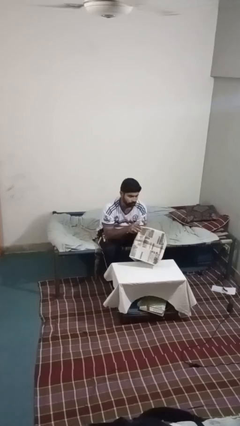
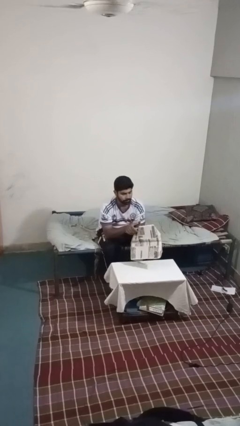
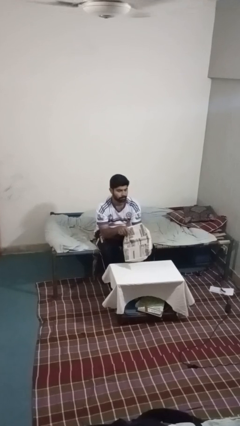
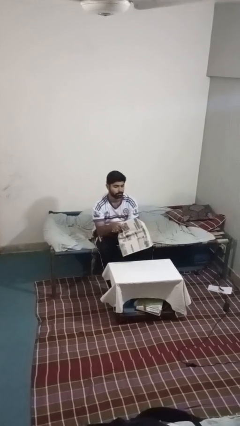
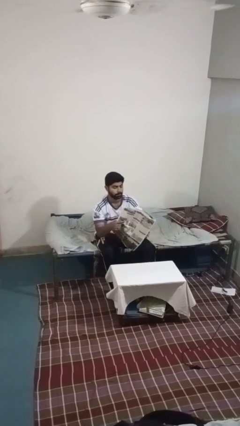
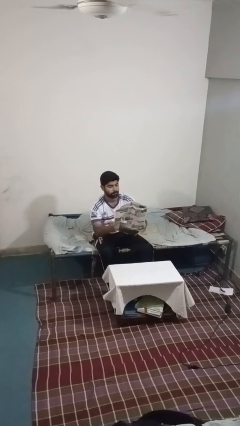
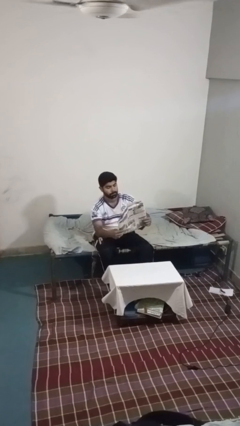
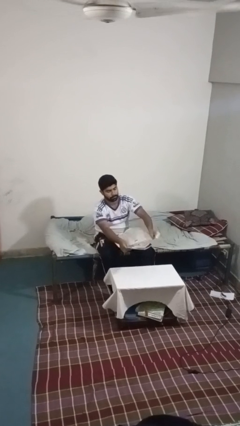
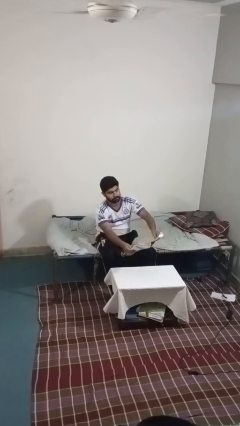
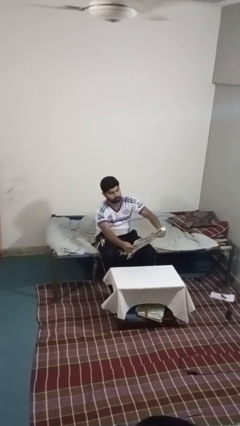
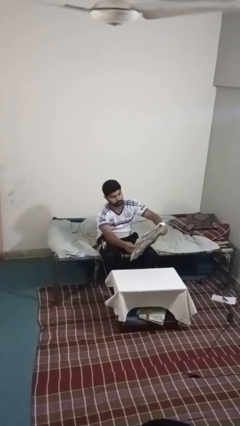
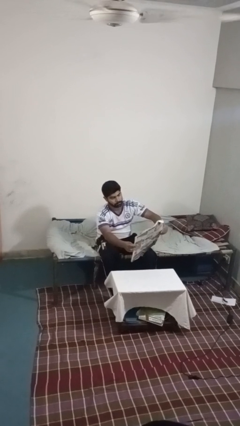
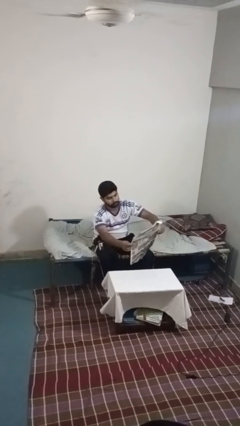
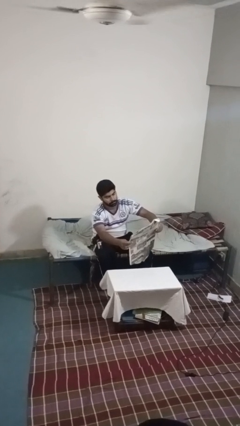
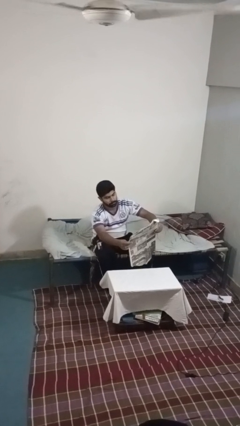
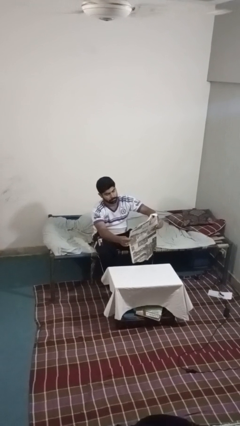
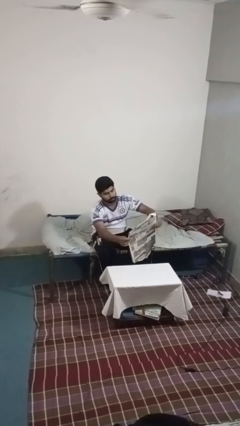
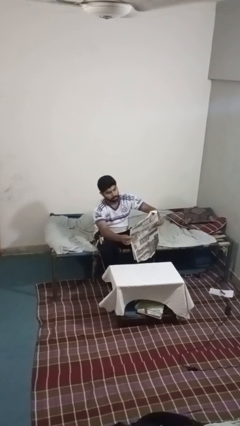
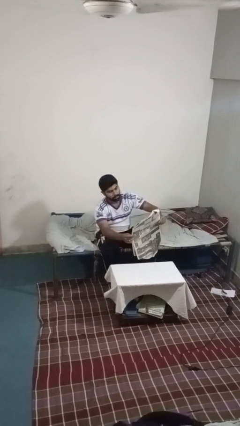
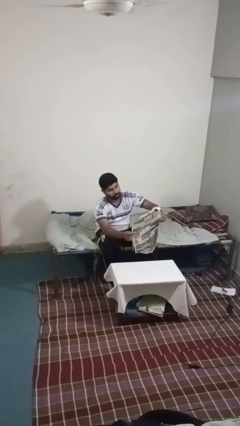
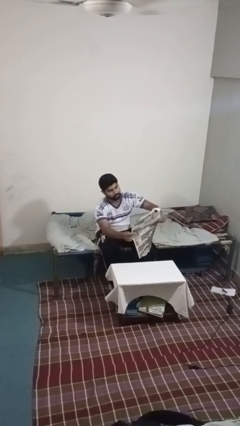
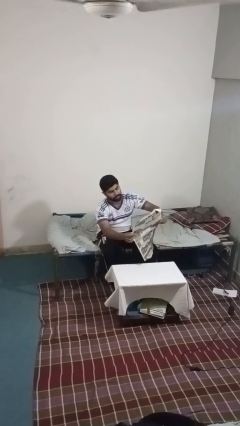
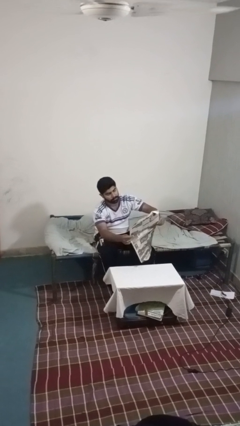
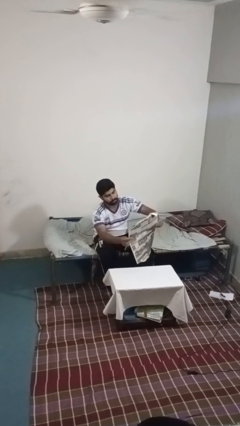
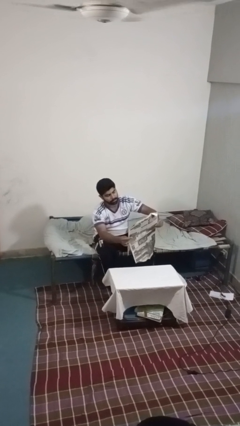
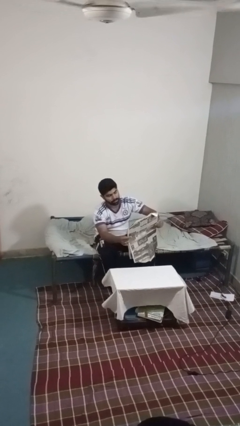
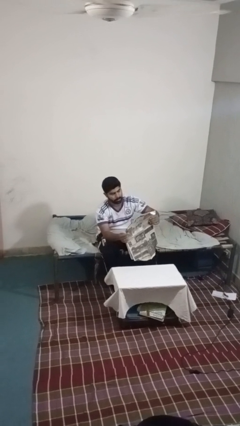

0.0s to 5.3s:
person reads newspaper

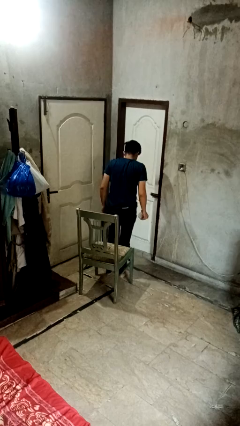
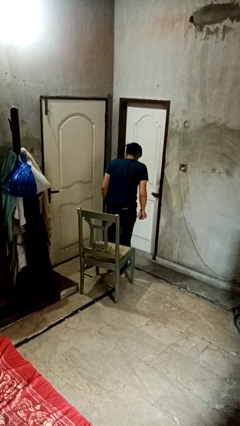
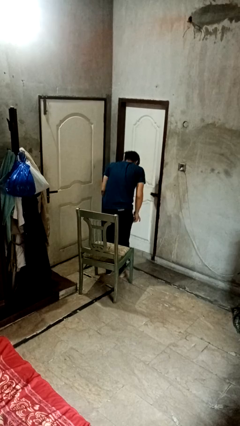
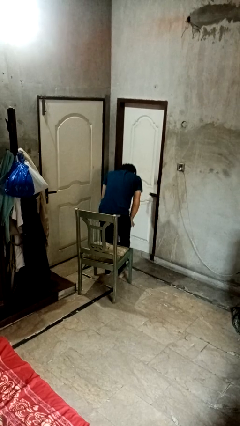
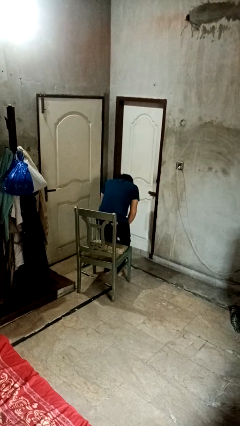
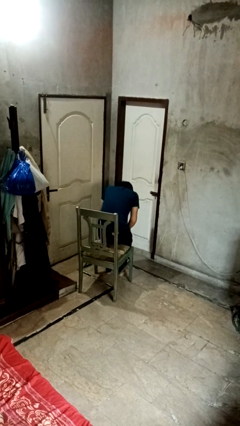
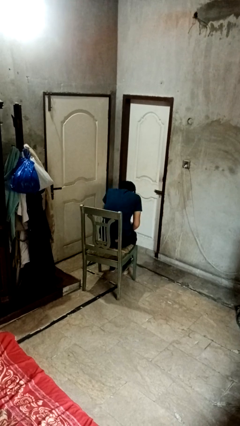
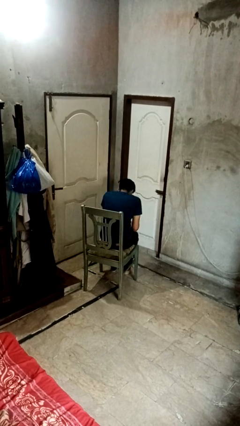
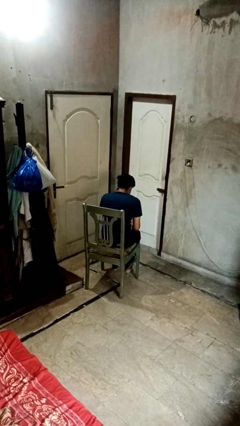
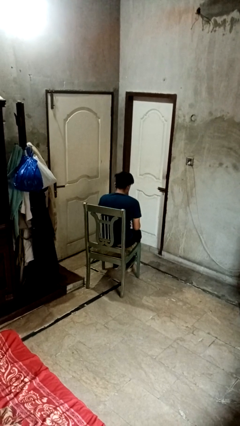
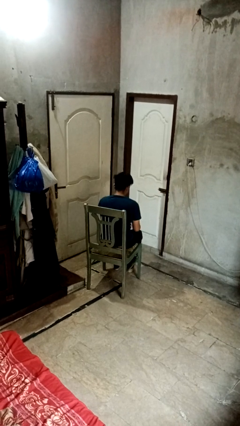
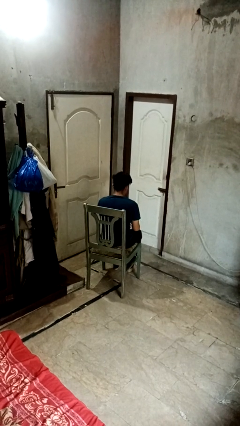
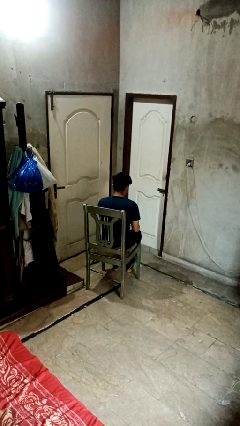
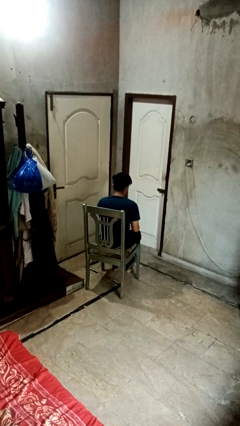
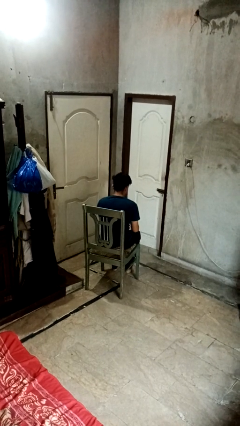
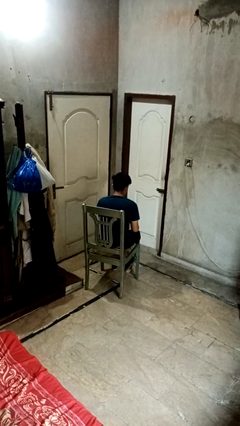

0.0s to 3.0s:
person sits down

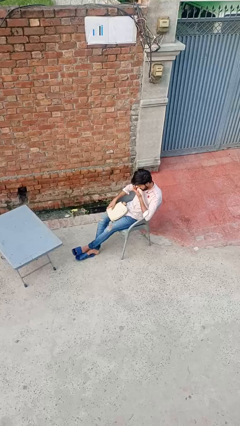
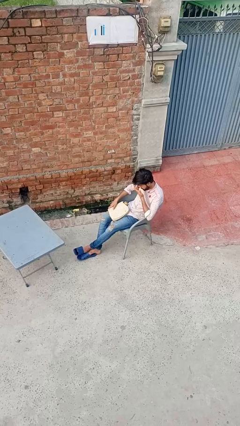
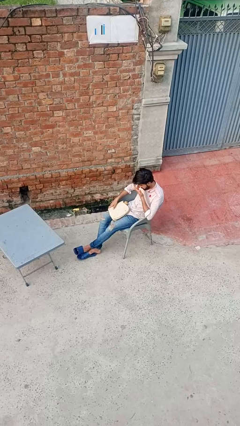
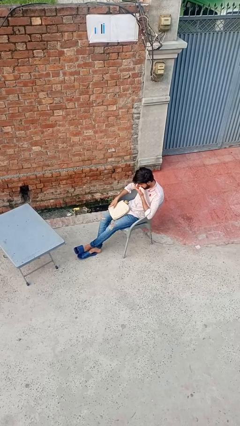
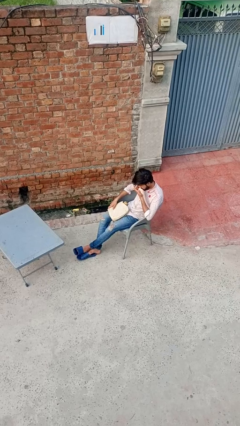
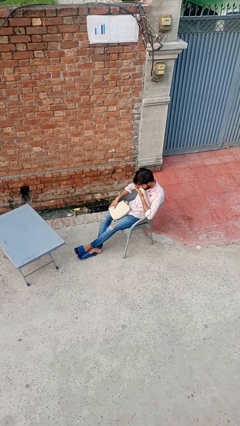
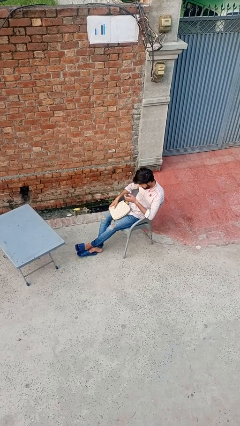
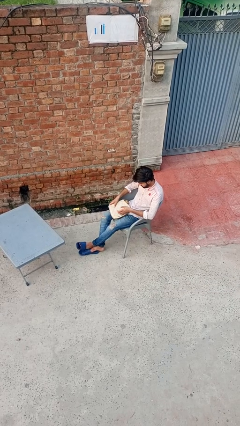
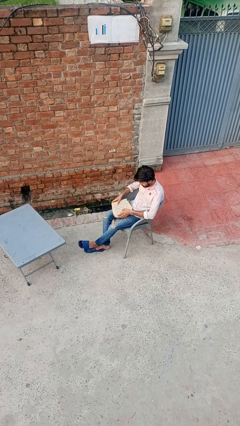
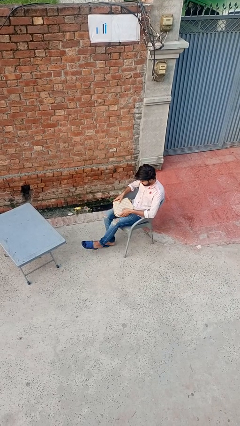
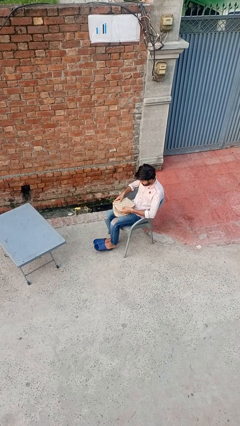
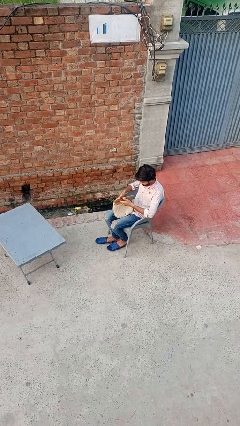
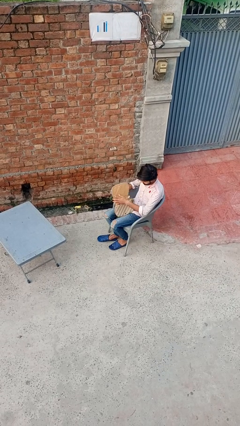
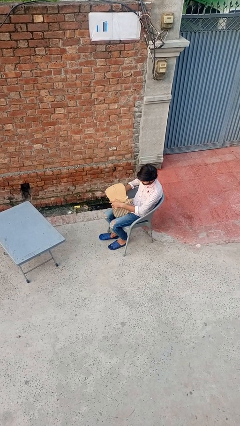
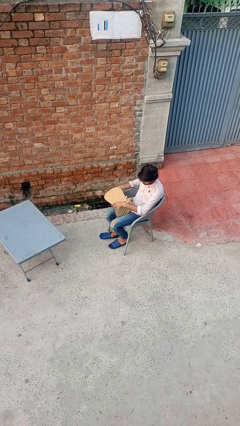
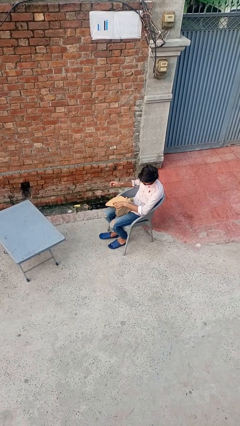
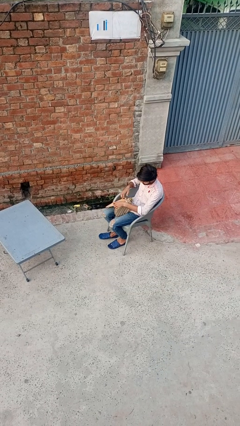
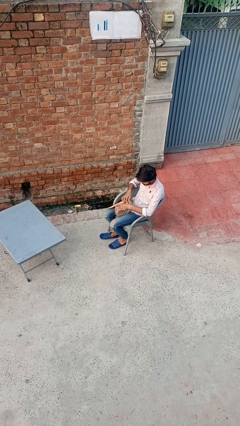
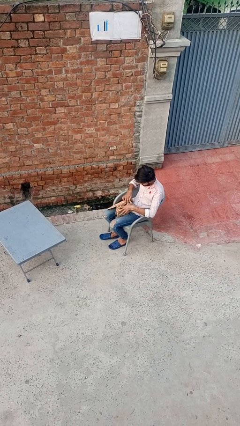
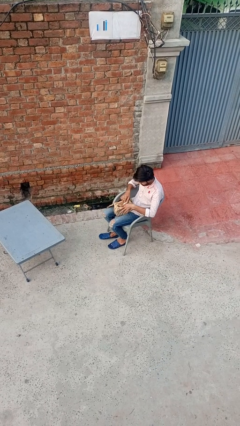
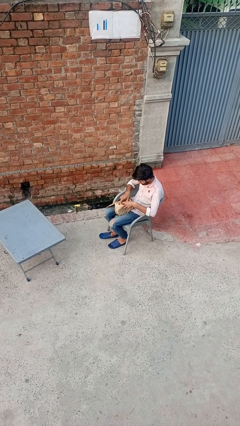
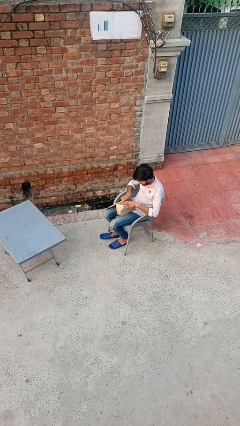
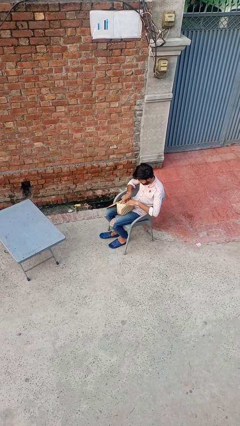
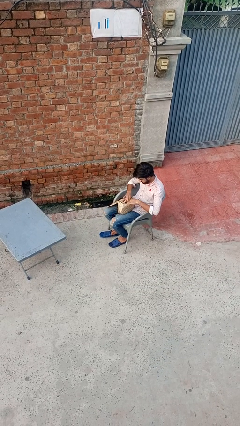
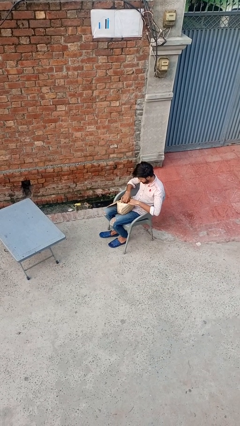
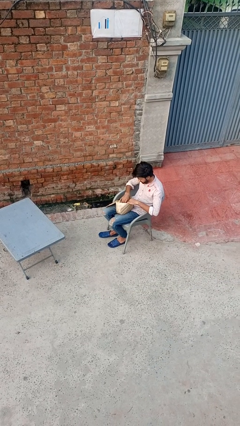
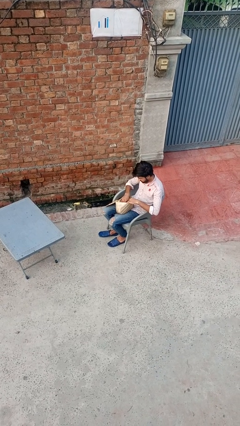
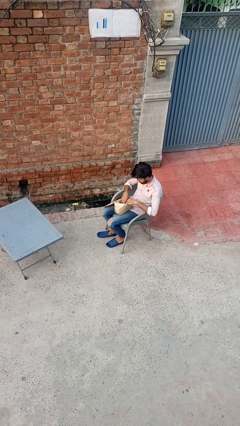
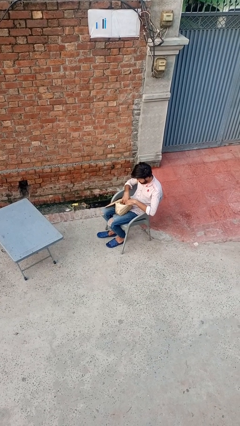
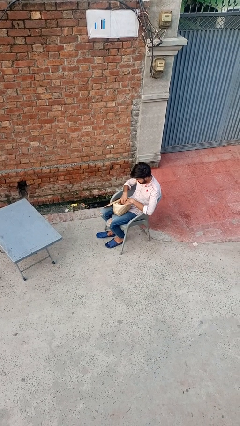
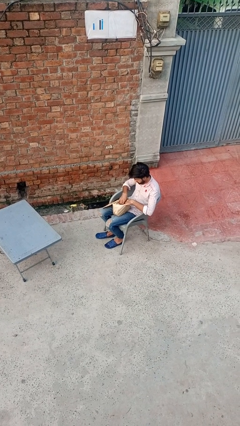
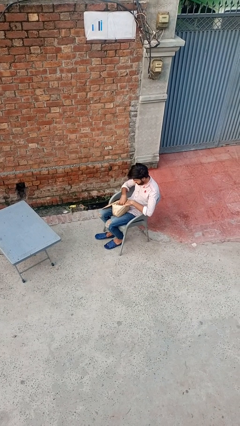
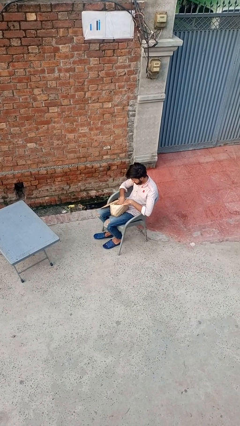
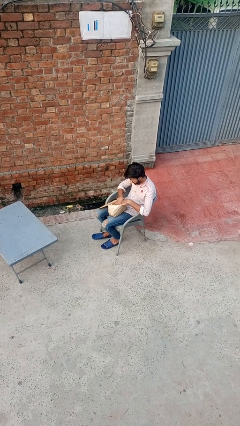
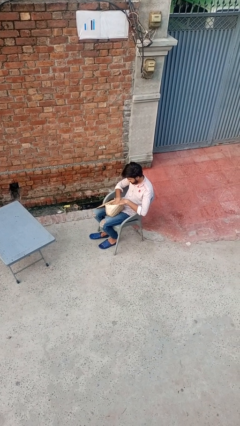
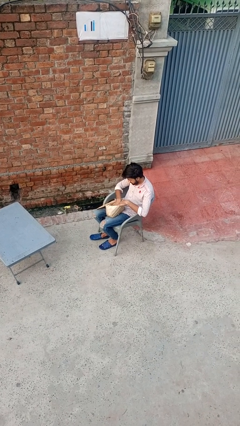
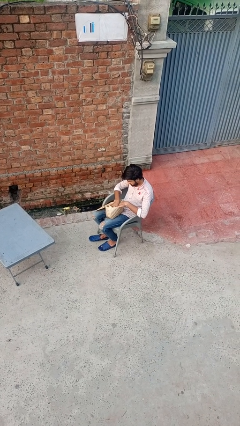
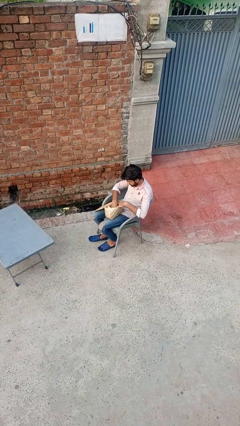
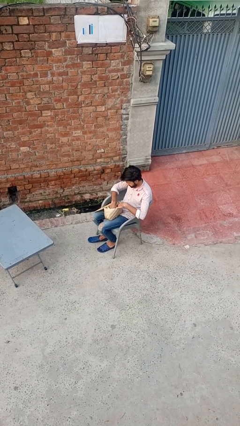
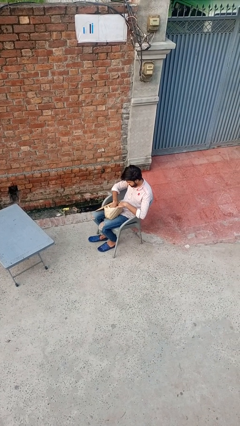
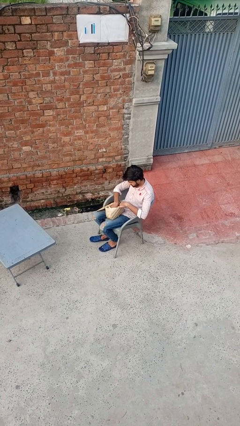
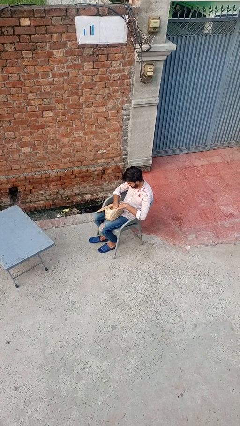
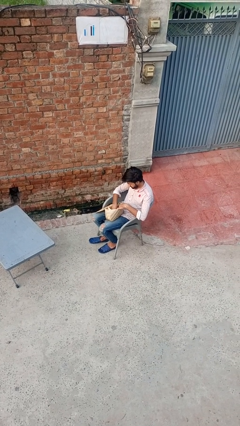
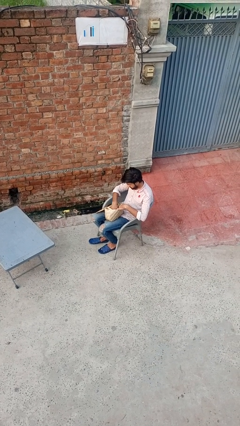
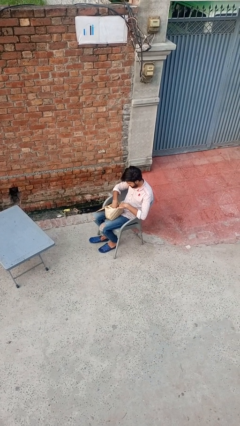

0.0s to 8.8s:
person searches in purse

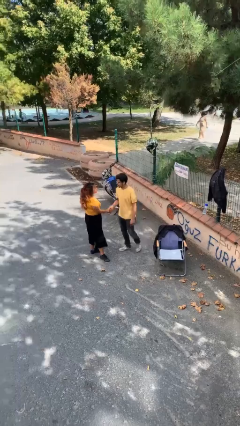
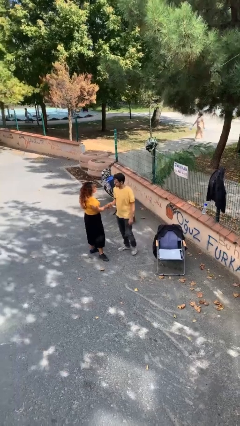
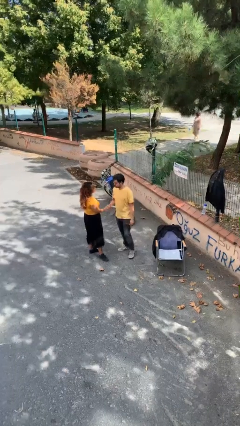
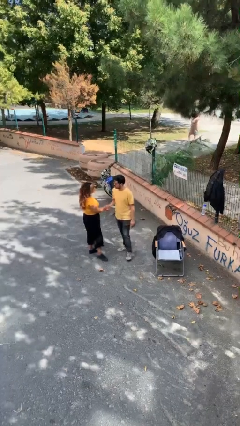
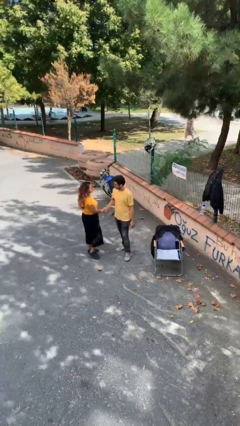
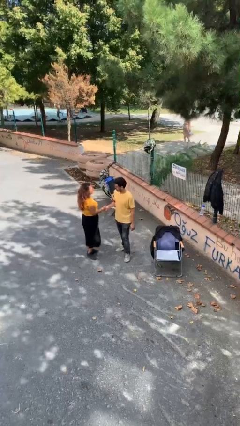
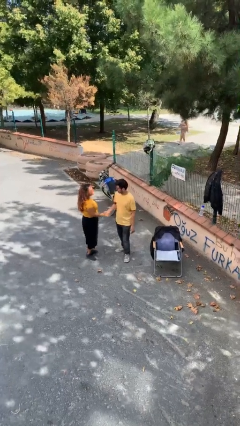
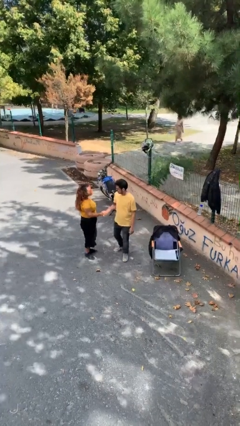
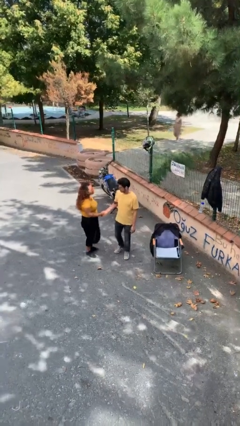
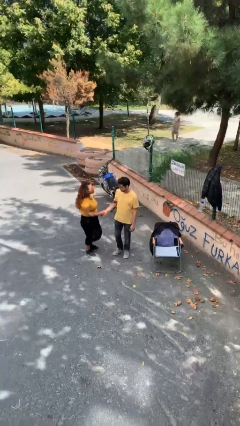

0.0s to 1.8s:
person shakes hand
